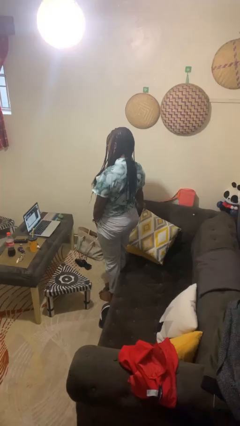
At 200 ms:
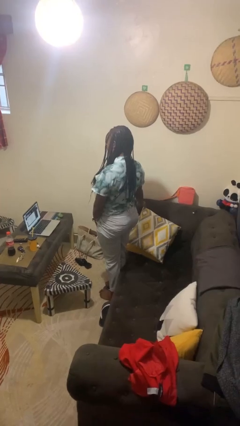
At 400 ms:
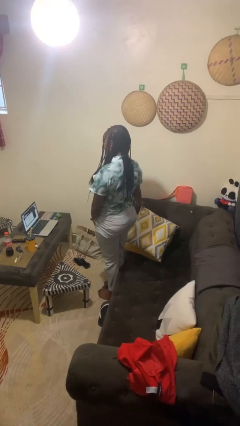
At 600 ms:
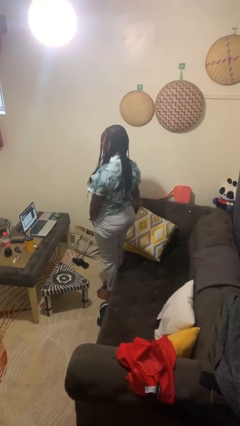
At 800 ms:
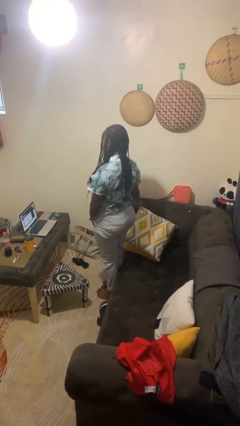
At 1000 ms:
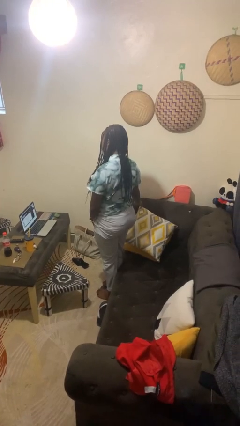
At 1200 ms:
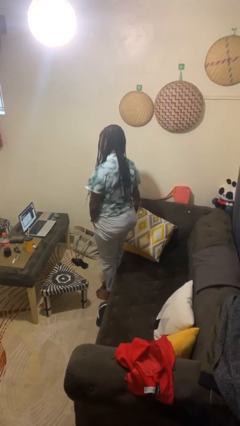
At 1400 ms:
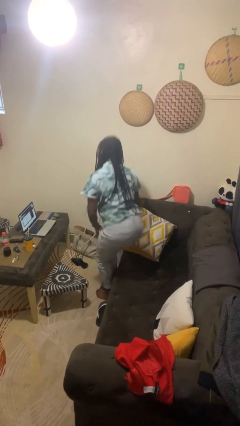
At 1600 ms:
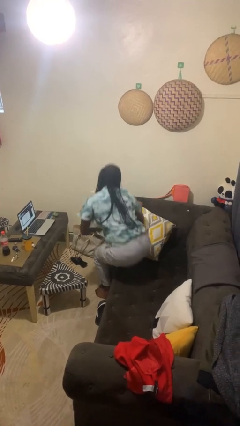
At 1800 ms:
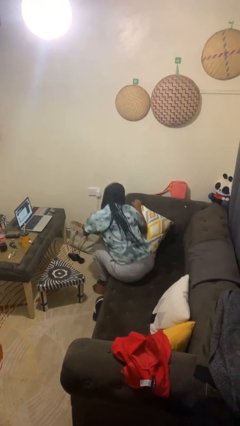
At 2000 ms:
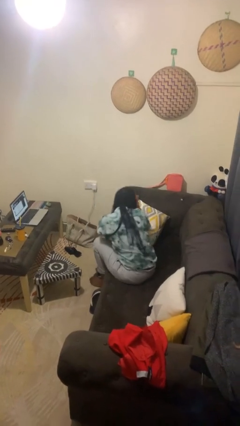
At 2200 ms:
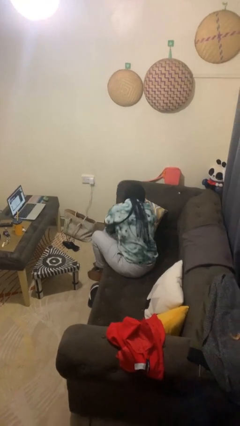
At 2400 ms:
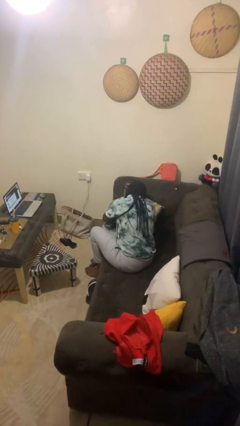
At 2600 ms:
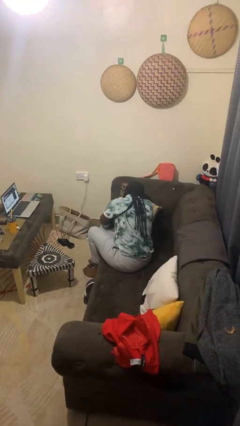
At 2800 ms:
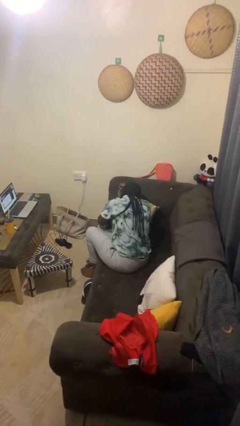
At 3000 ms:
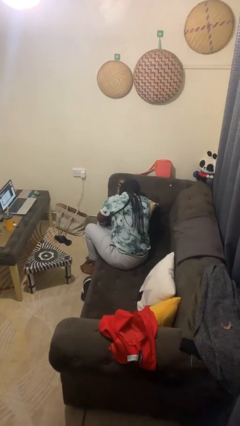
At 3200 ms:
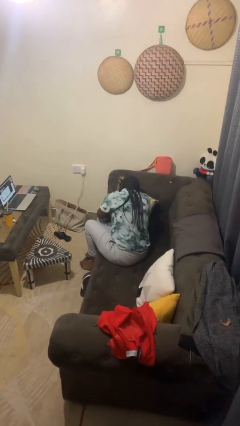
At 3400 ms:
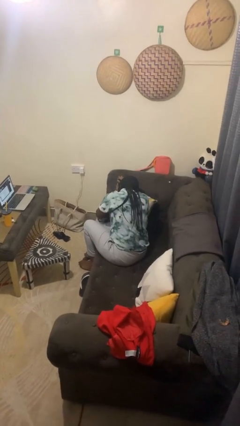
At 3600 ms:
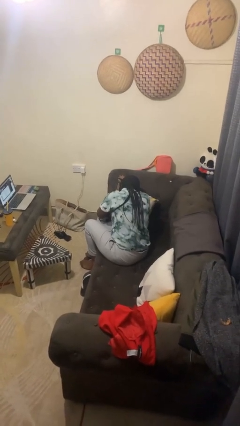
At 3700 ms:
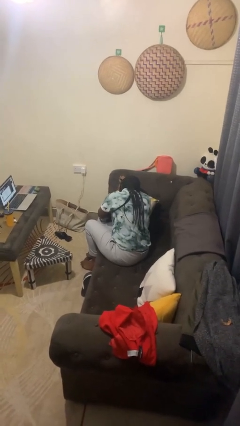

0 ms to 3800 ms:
person lies down on couch

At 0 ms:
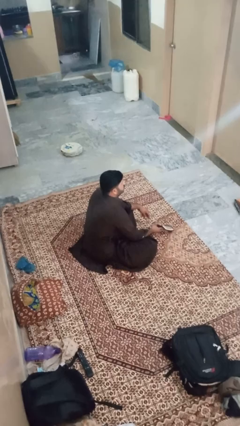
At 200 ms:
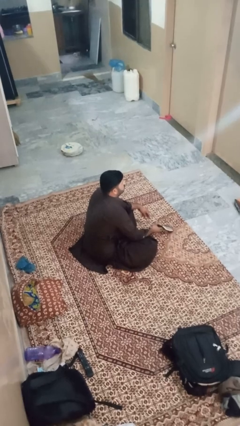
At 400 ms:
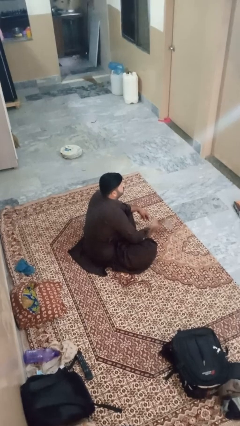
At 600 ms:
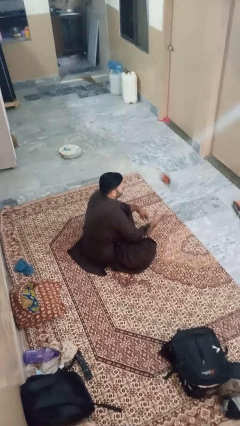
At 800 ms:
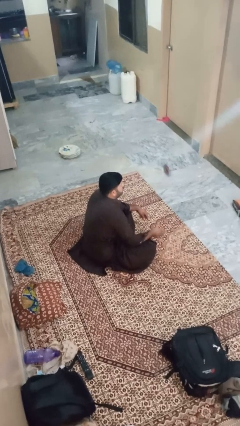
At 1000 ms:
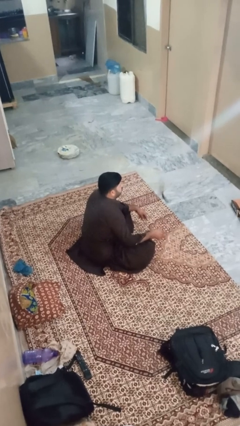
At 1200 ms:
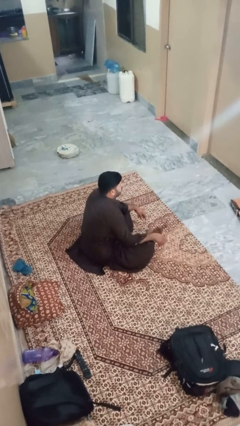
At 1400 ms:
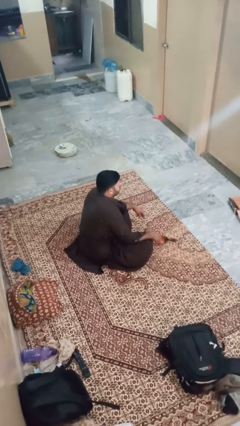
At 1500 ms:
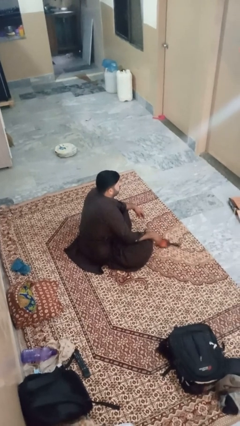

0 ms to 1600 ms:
person throws object into air

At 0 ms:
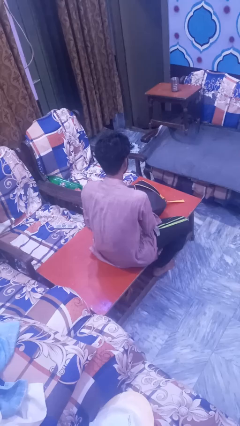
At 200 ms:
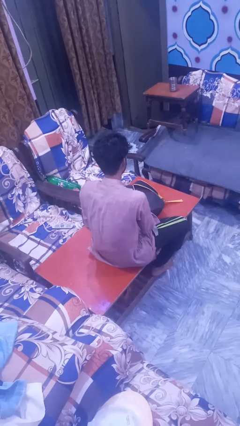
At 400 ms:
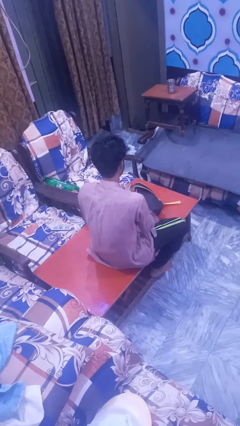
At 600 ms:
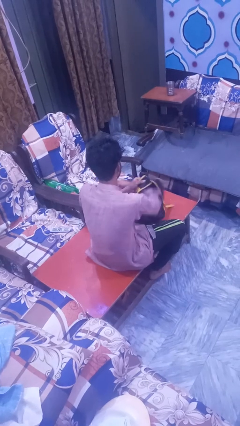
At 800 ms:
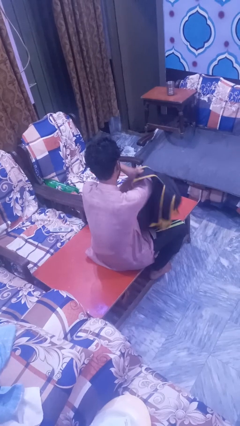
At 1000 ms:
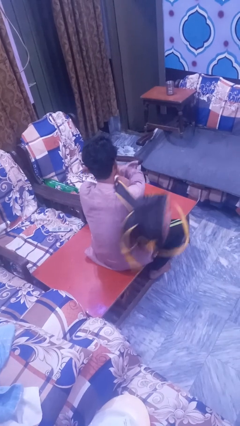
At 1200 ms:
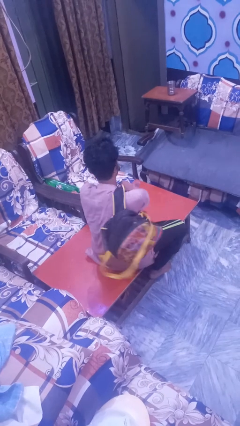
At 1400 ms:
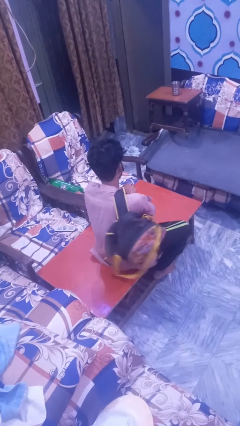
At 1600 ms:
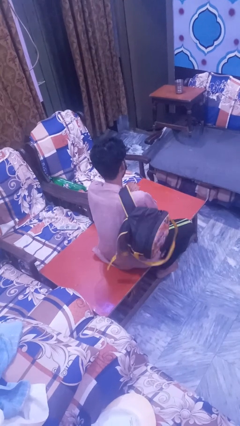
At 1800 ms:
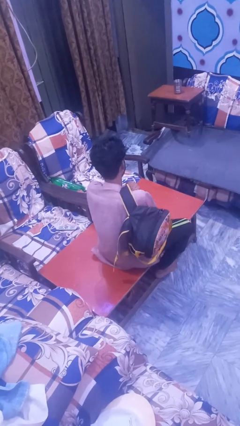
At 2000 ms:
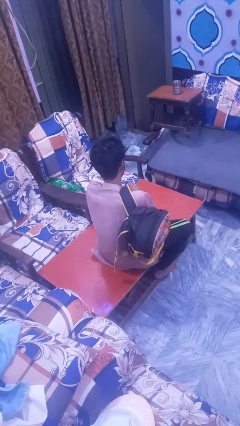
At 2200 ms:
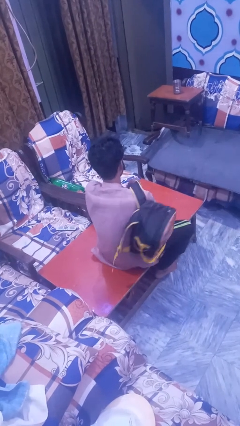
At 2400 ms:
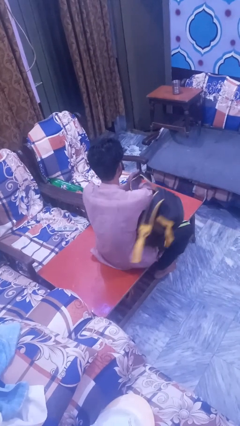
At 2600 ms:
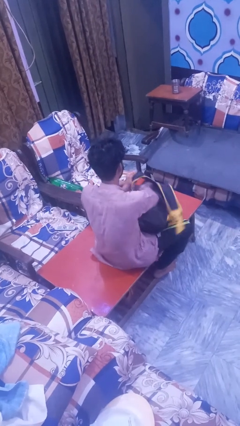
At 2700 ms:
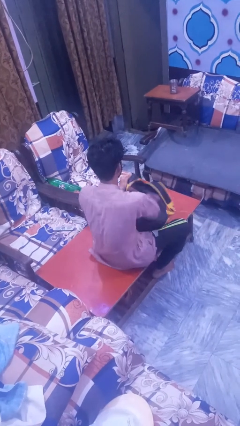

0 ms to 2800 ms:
person puts on backpack

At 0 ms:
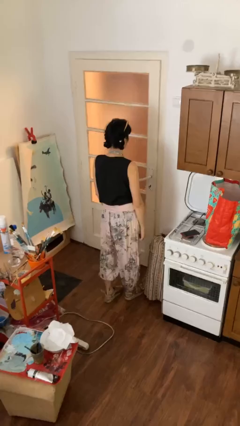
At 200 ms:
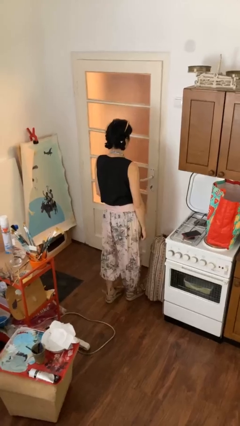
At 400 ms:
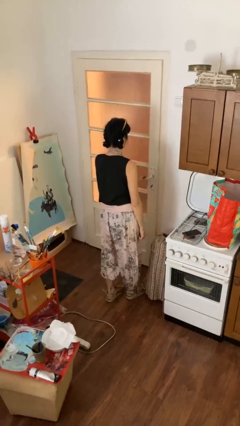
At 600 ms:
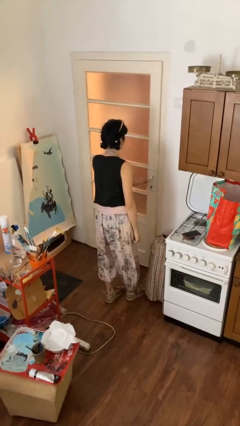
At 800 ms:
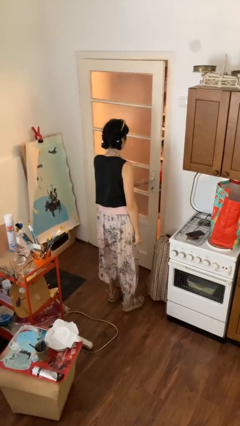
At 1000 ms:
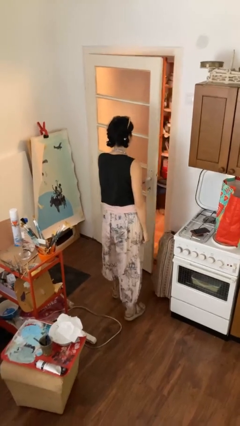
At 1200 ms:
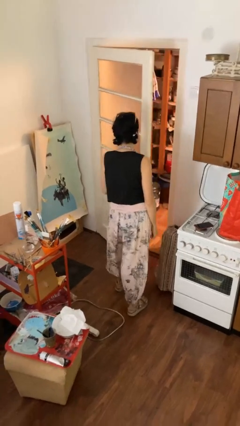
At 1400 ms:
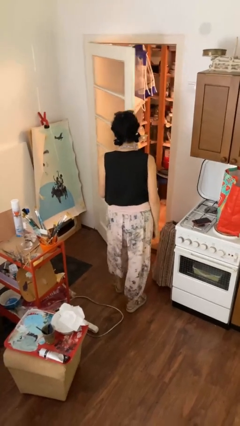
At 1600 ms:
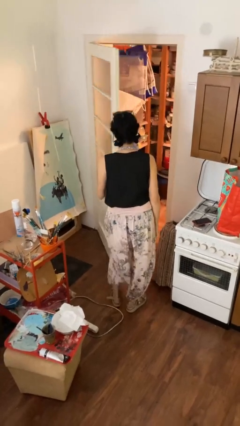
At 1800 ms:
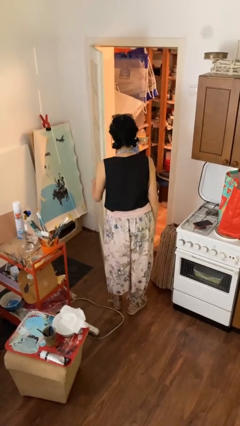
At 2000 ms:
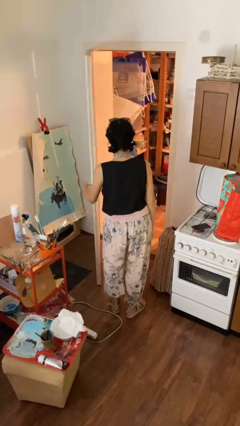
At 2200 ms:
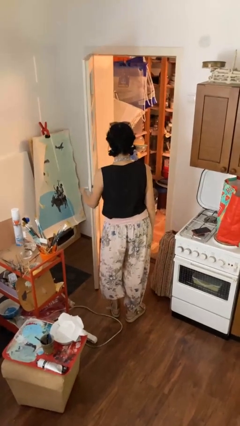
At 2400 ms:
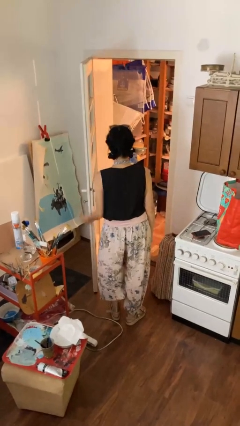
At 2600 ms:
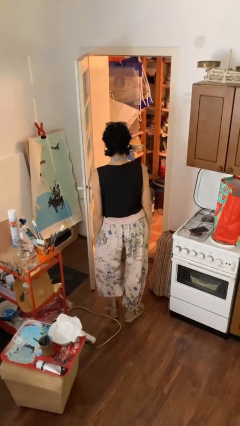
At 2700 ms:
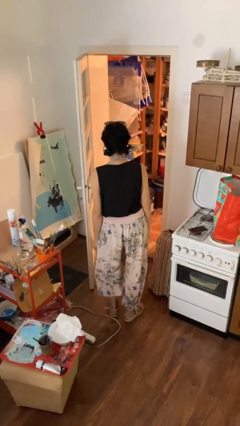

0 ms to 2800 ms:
person opens facility door

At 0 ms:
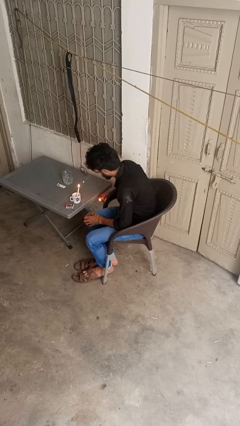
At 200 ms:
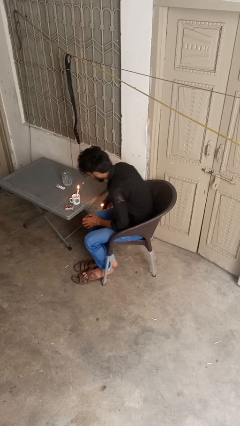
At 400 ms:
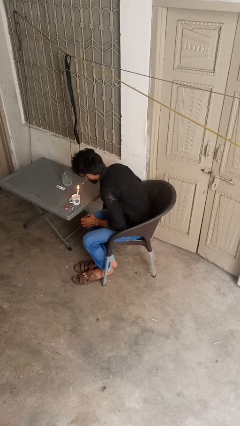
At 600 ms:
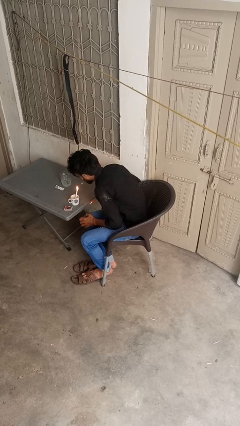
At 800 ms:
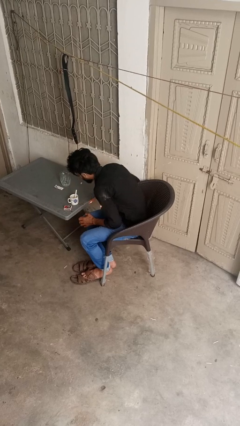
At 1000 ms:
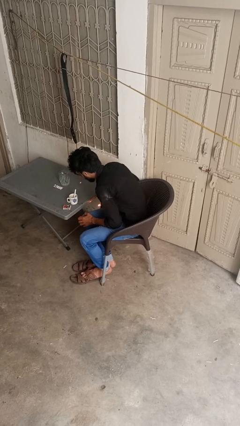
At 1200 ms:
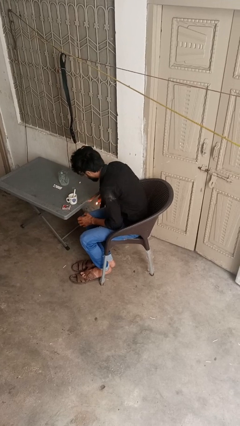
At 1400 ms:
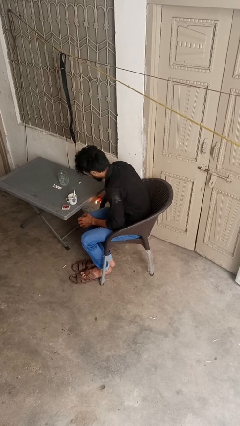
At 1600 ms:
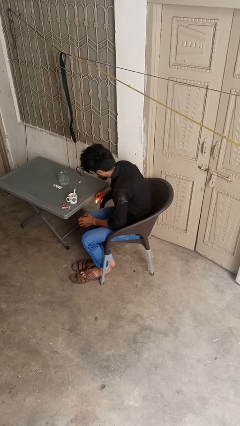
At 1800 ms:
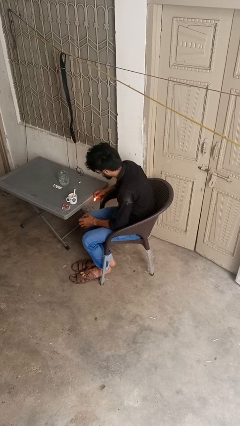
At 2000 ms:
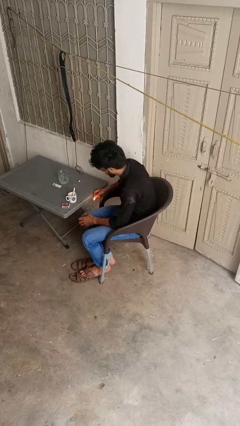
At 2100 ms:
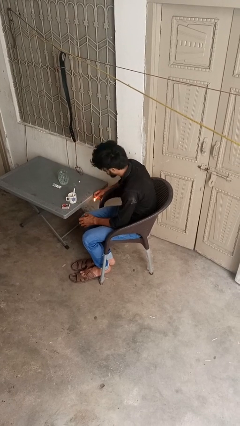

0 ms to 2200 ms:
person extinguishes candle

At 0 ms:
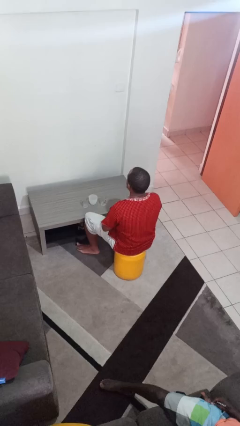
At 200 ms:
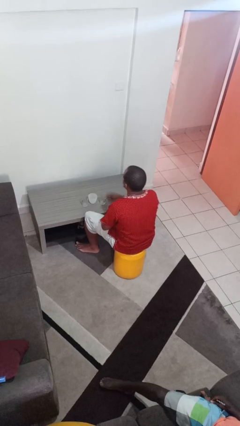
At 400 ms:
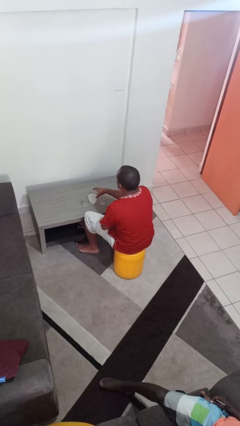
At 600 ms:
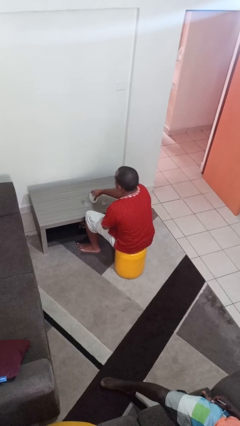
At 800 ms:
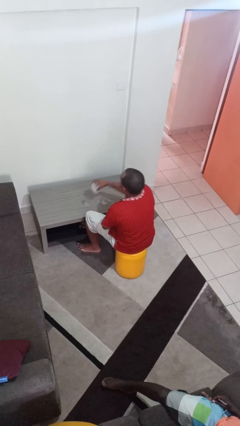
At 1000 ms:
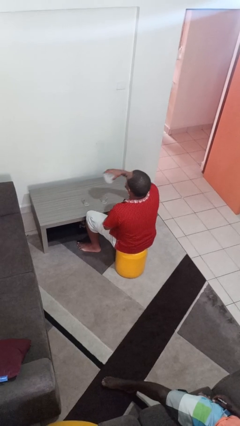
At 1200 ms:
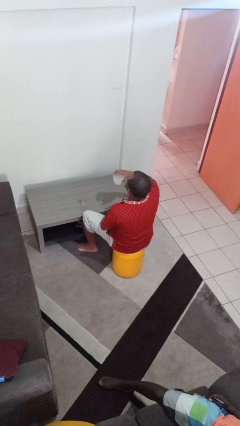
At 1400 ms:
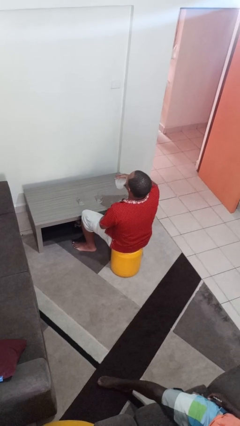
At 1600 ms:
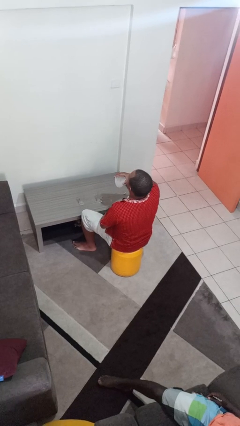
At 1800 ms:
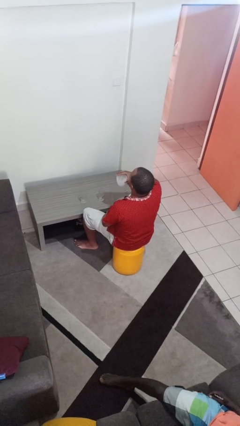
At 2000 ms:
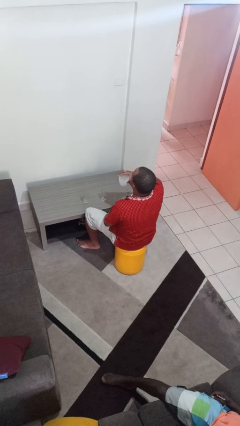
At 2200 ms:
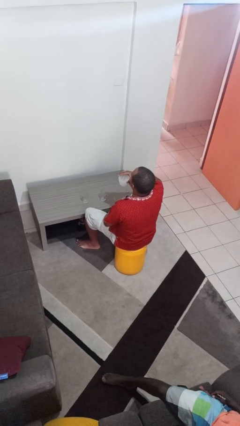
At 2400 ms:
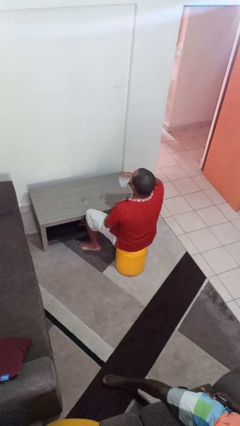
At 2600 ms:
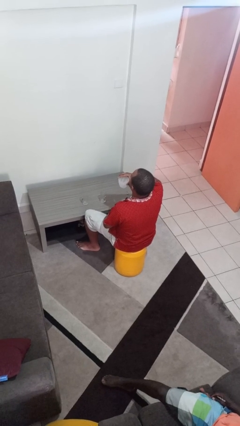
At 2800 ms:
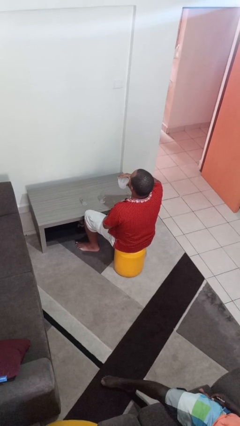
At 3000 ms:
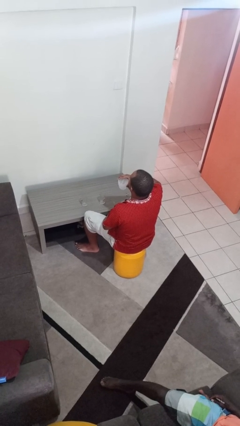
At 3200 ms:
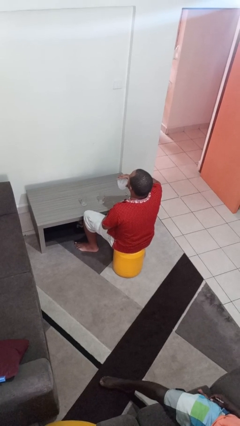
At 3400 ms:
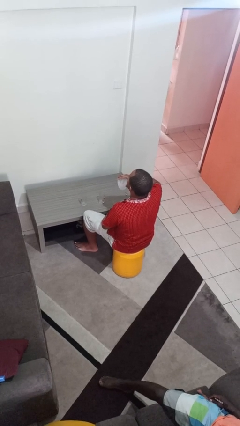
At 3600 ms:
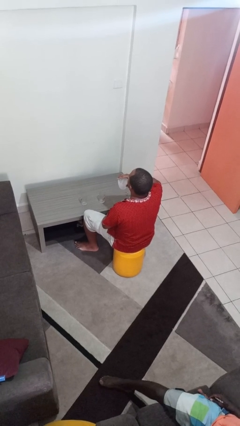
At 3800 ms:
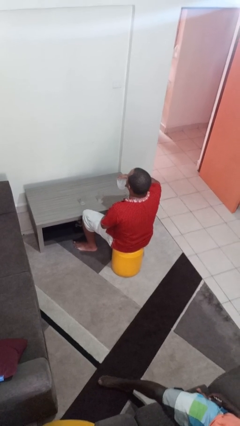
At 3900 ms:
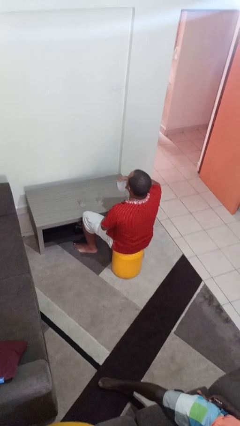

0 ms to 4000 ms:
person picks up object from table
